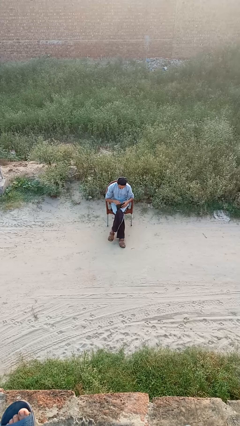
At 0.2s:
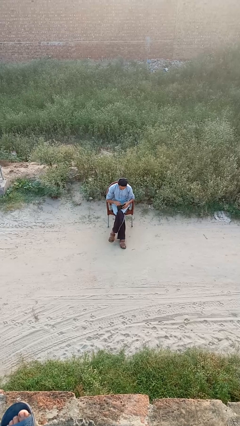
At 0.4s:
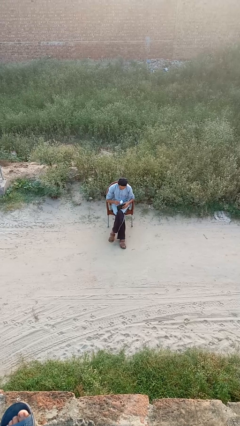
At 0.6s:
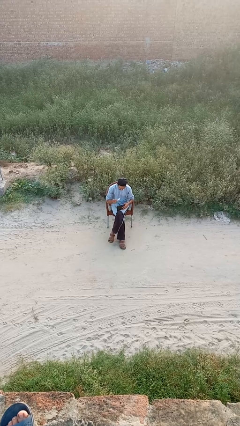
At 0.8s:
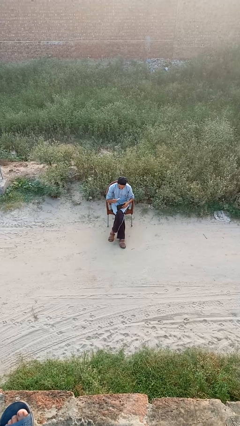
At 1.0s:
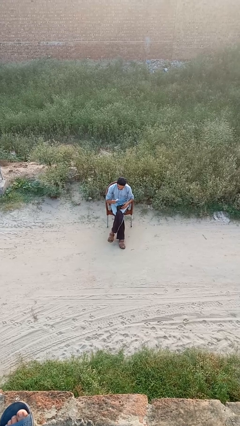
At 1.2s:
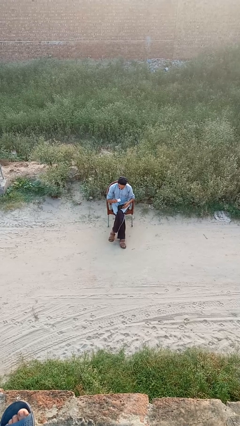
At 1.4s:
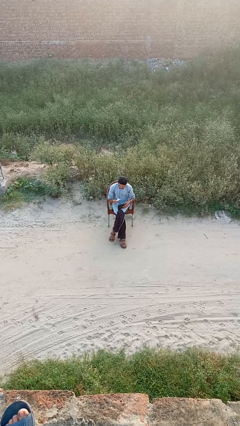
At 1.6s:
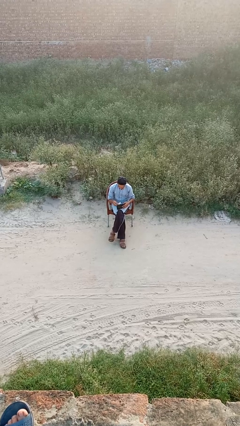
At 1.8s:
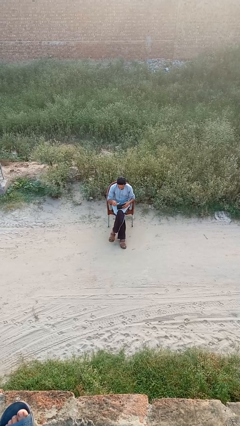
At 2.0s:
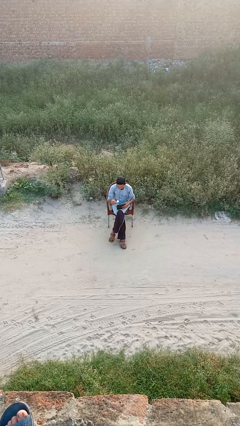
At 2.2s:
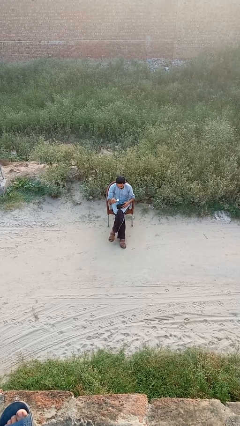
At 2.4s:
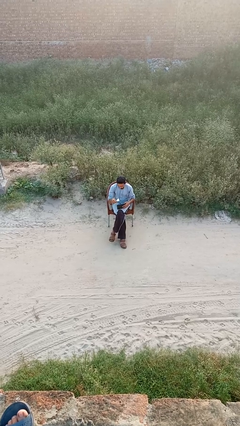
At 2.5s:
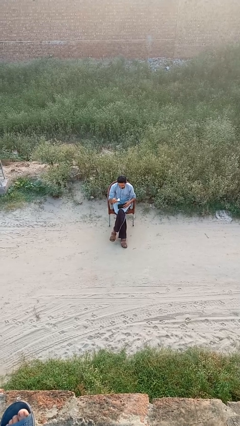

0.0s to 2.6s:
person takes object from purse

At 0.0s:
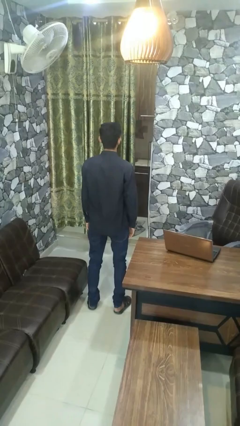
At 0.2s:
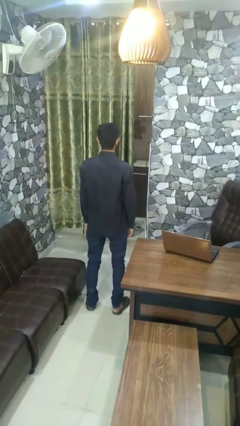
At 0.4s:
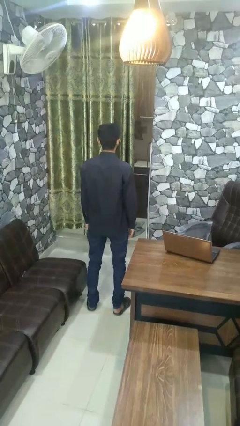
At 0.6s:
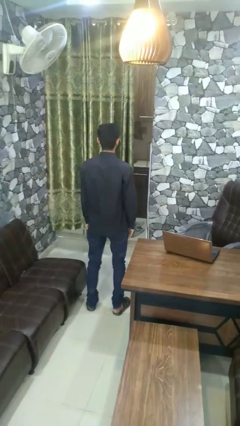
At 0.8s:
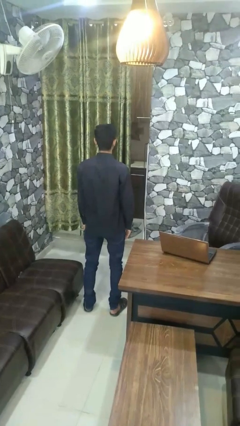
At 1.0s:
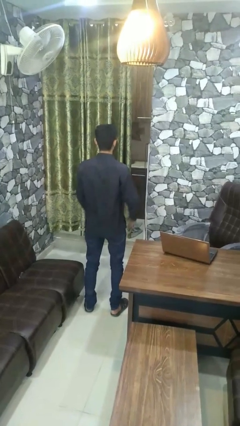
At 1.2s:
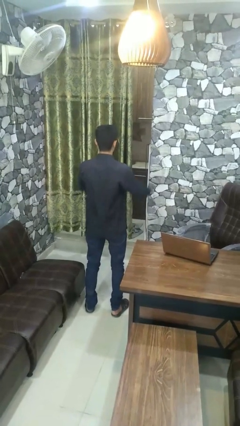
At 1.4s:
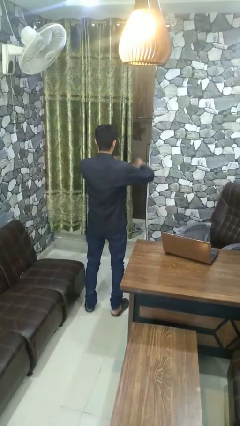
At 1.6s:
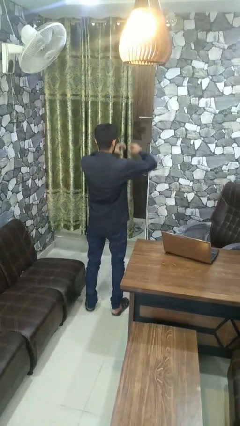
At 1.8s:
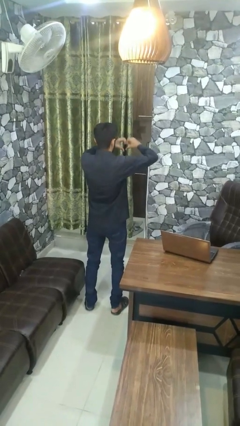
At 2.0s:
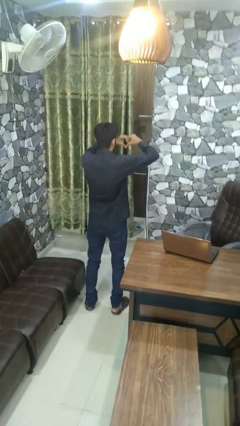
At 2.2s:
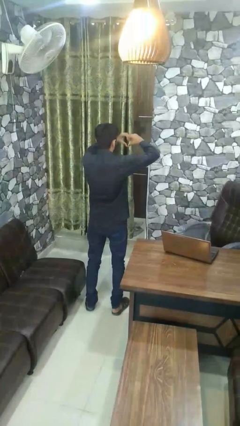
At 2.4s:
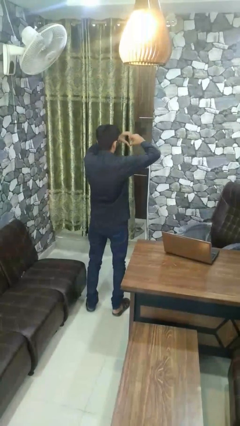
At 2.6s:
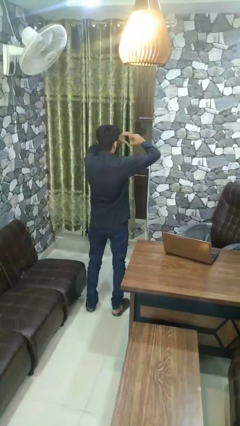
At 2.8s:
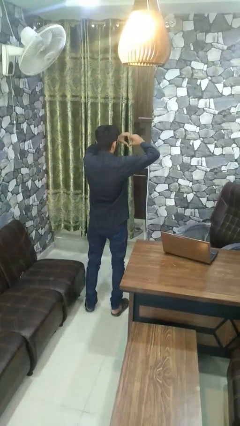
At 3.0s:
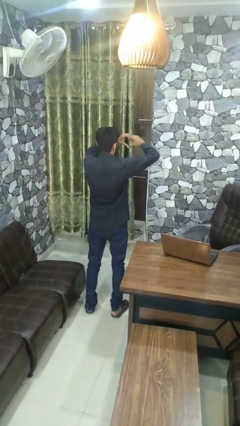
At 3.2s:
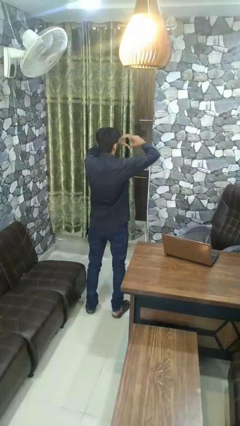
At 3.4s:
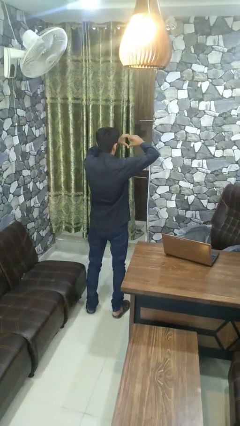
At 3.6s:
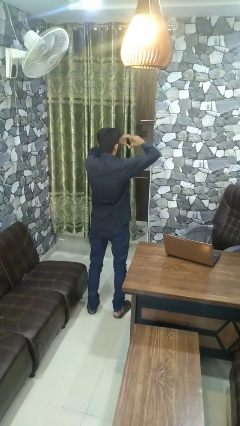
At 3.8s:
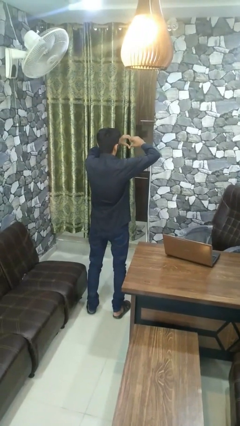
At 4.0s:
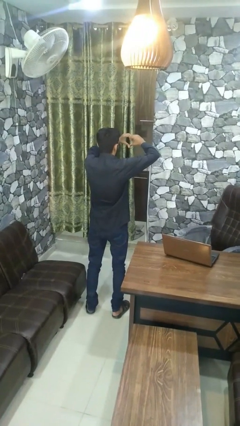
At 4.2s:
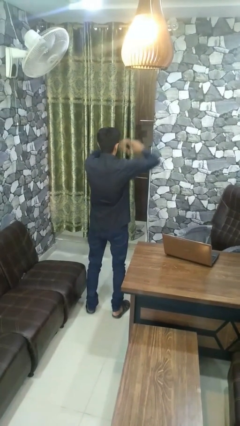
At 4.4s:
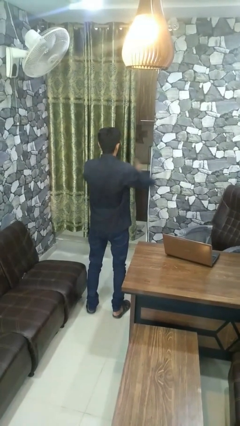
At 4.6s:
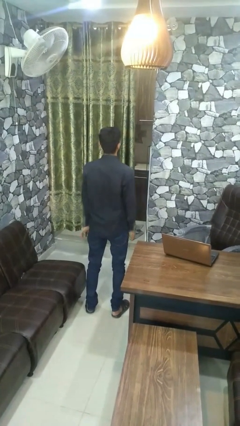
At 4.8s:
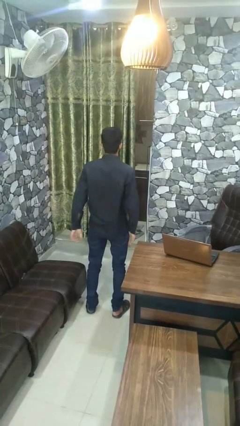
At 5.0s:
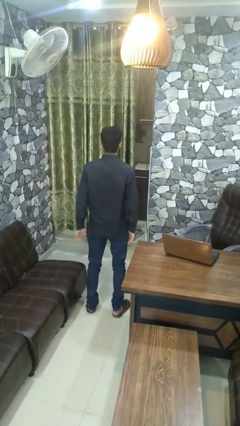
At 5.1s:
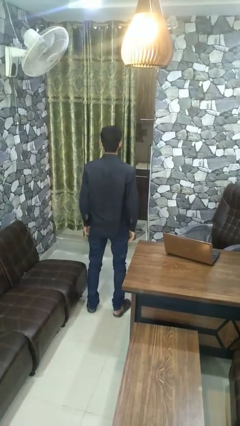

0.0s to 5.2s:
person gestures heart

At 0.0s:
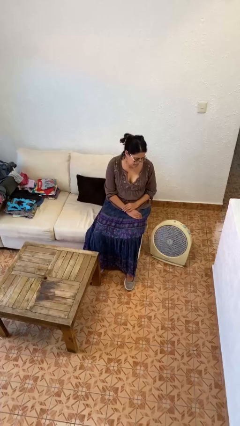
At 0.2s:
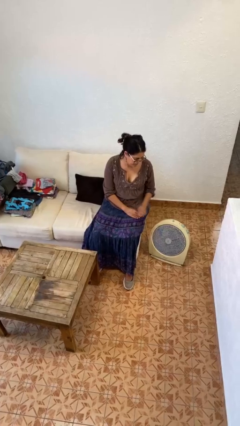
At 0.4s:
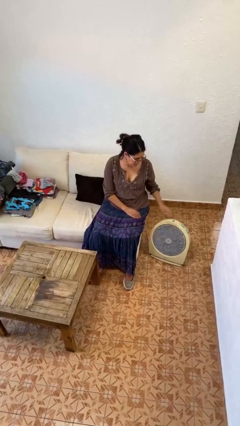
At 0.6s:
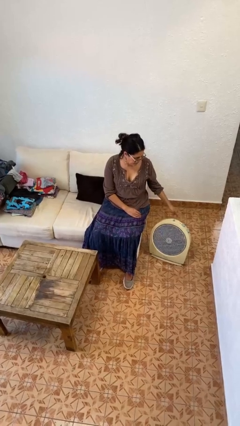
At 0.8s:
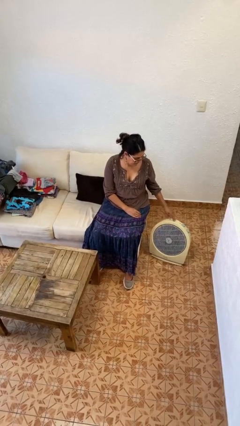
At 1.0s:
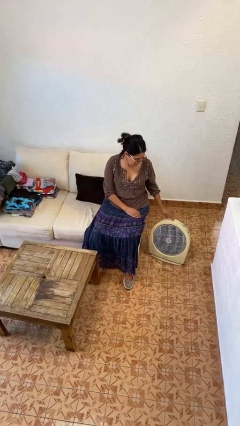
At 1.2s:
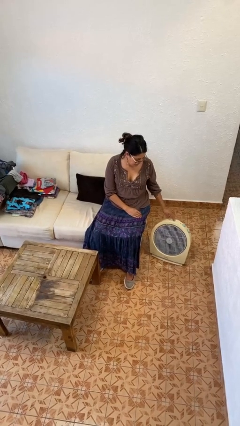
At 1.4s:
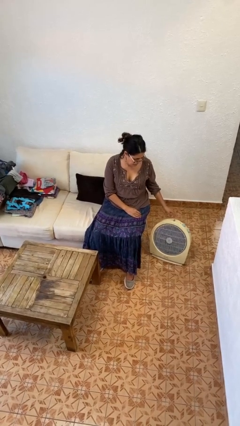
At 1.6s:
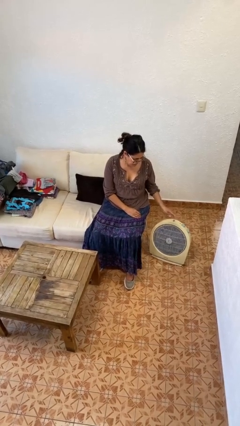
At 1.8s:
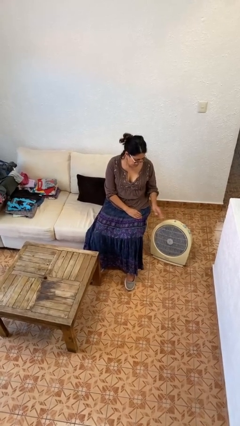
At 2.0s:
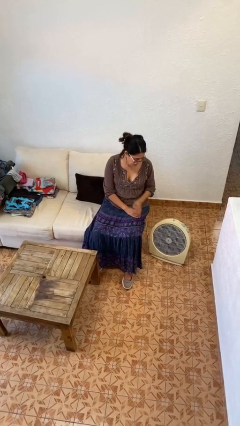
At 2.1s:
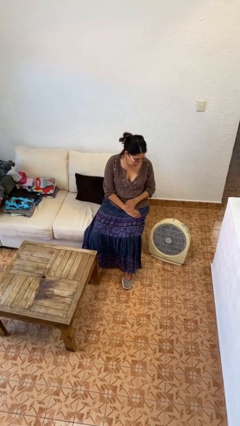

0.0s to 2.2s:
person turns off fan

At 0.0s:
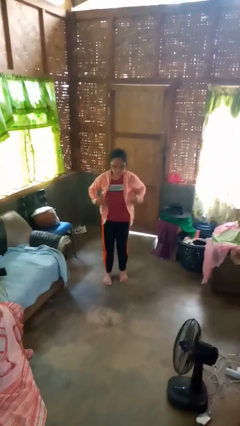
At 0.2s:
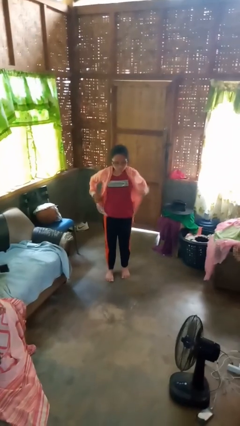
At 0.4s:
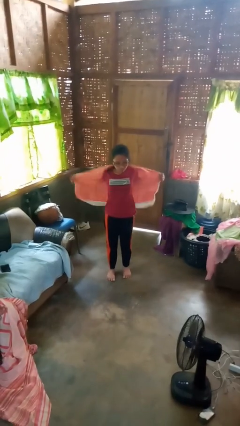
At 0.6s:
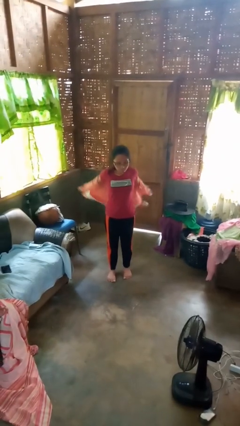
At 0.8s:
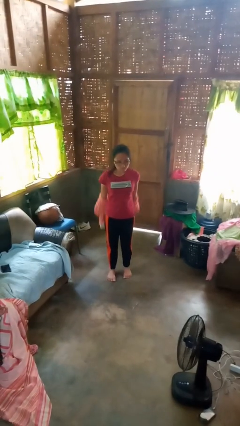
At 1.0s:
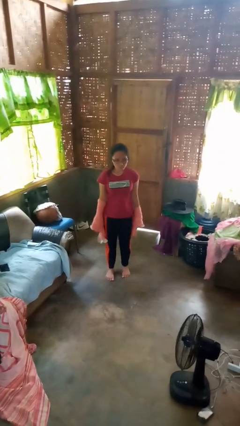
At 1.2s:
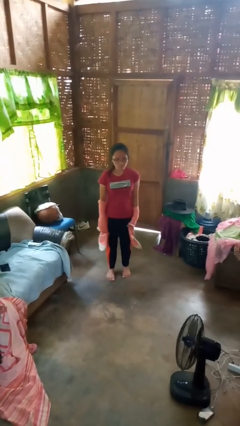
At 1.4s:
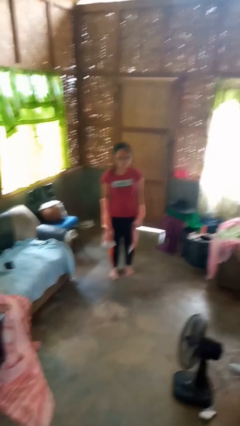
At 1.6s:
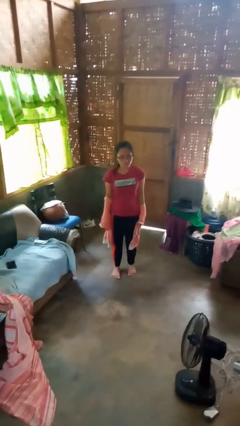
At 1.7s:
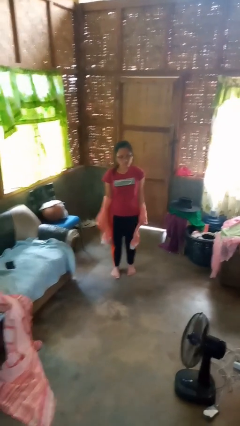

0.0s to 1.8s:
person takes off jacket

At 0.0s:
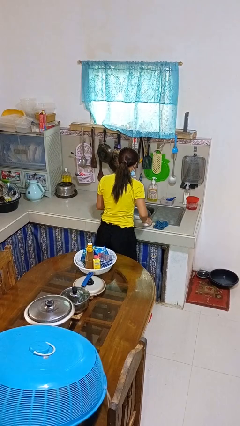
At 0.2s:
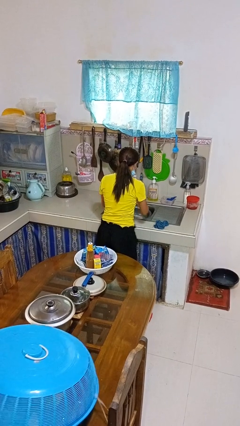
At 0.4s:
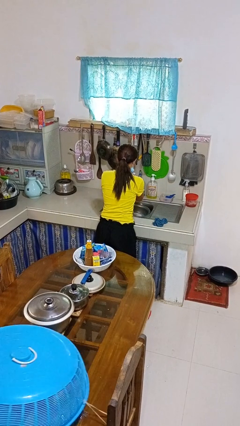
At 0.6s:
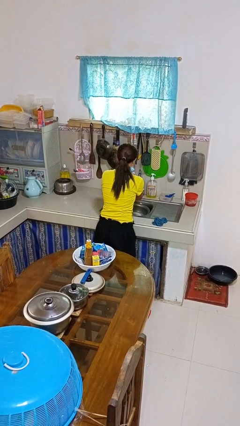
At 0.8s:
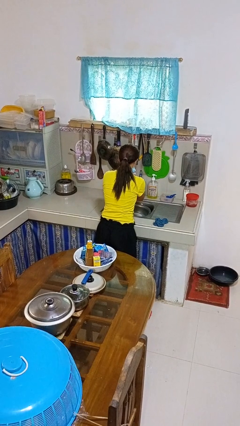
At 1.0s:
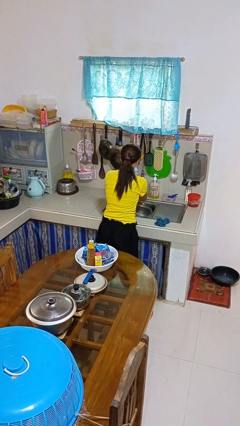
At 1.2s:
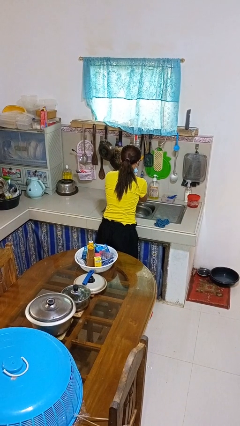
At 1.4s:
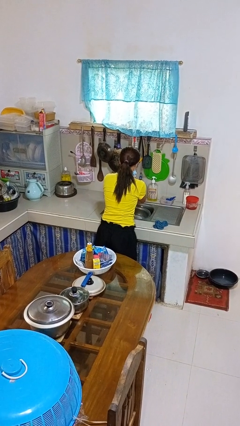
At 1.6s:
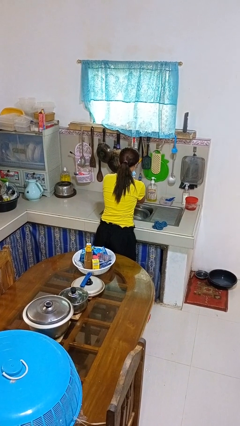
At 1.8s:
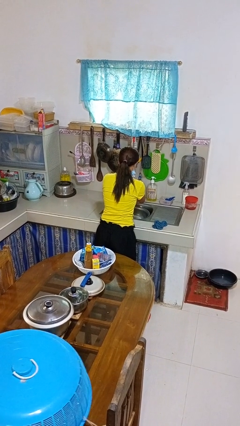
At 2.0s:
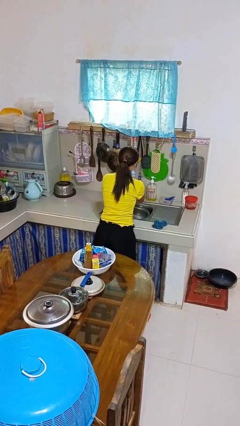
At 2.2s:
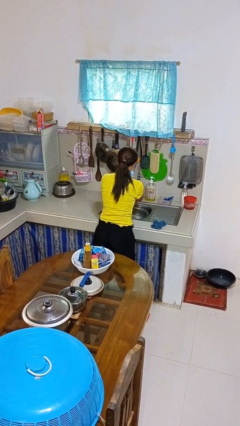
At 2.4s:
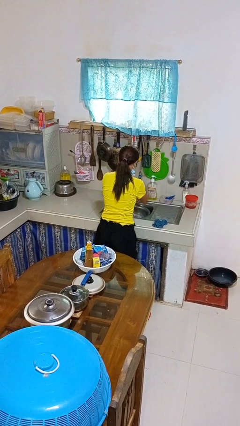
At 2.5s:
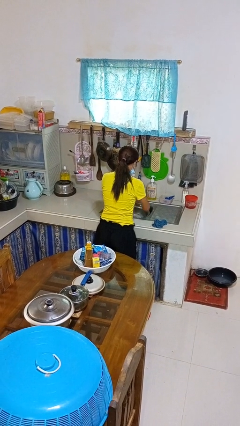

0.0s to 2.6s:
person washes hands

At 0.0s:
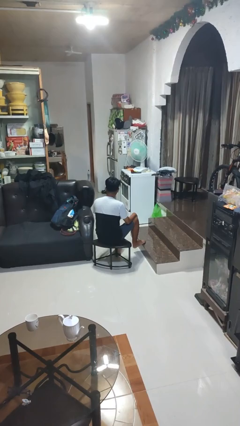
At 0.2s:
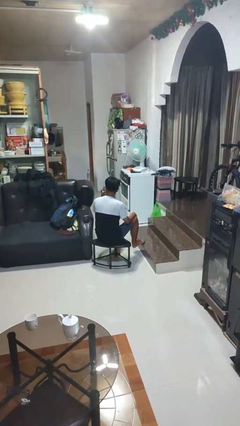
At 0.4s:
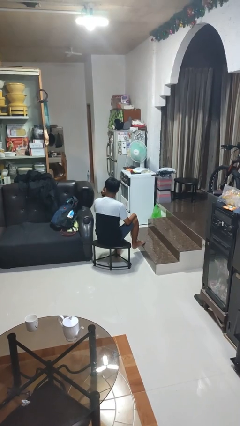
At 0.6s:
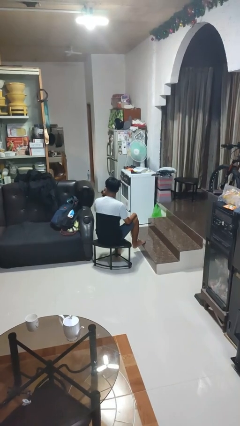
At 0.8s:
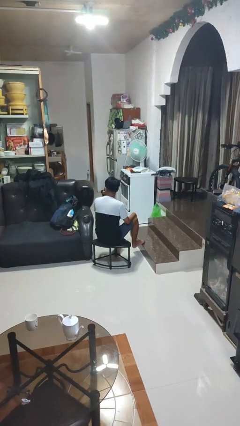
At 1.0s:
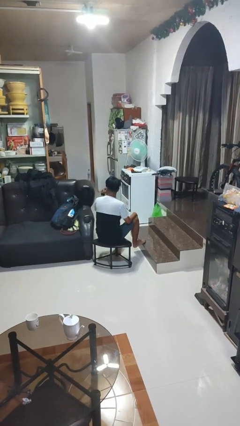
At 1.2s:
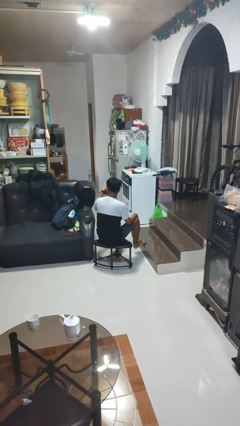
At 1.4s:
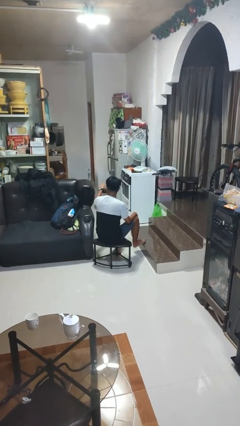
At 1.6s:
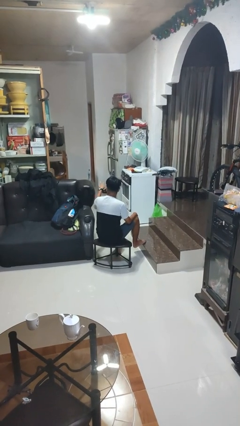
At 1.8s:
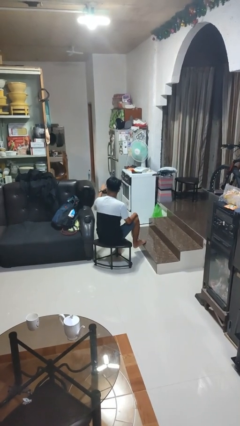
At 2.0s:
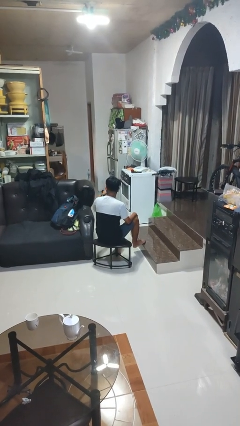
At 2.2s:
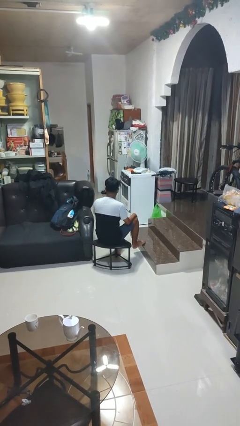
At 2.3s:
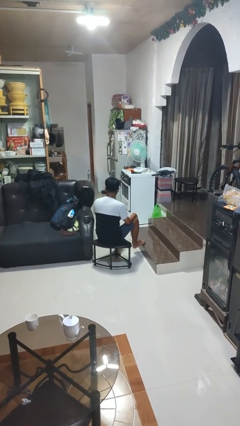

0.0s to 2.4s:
person gestures watch closely

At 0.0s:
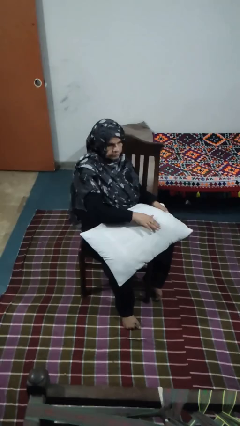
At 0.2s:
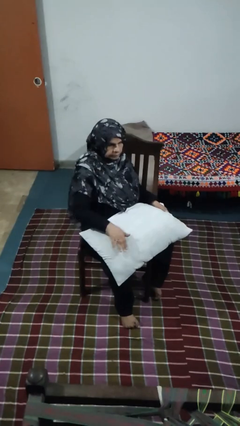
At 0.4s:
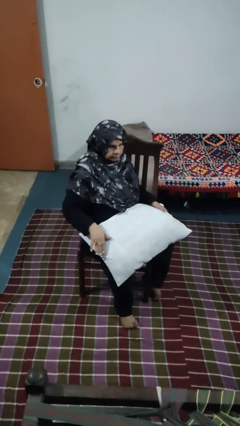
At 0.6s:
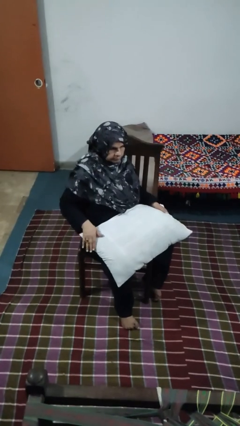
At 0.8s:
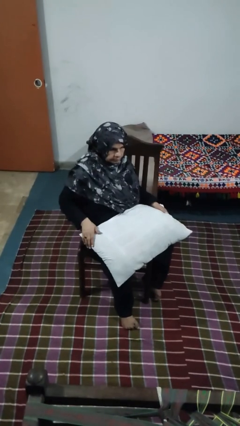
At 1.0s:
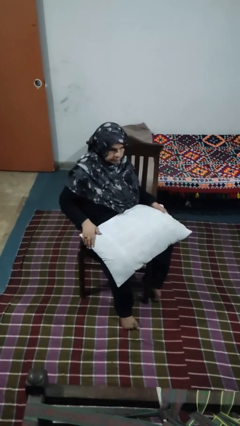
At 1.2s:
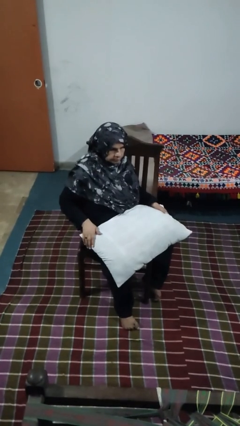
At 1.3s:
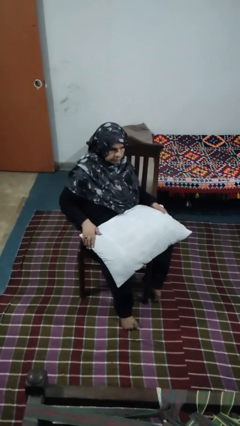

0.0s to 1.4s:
person waves hand over object
